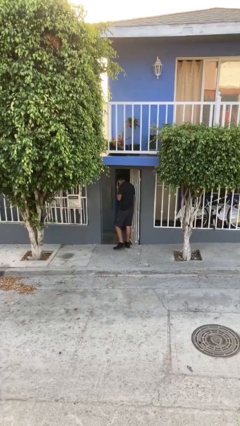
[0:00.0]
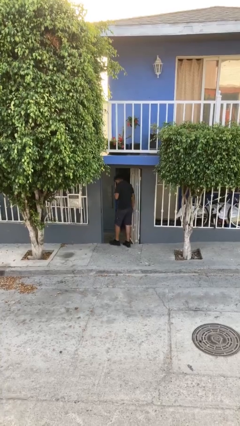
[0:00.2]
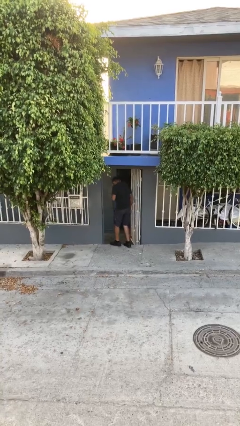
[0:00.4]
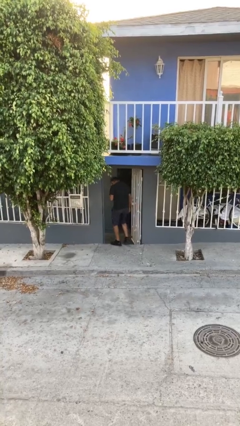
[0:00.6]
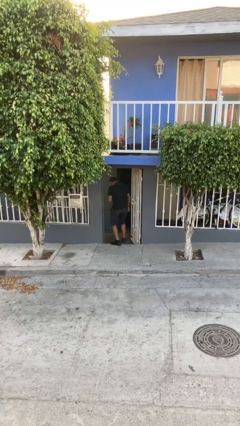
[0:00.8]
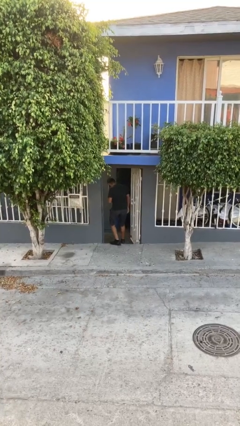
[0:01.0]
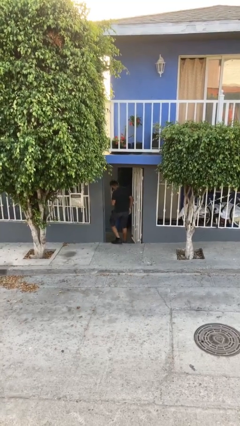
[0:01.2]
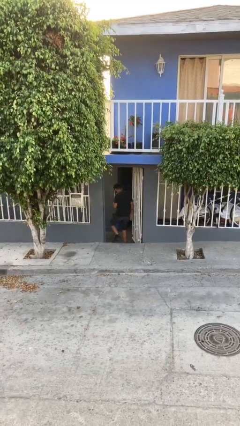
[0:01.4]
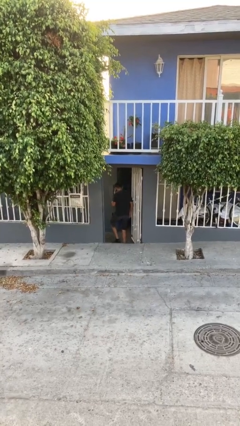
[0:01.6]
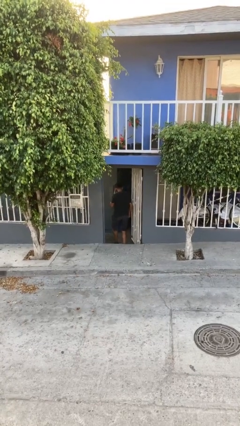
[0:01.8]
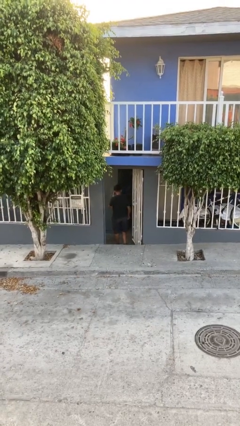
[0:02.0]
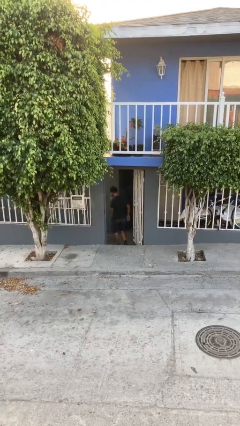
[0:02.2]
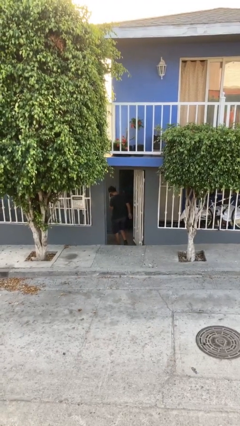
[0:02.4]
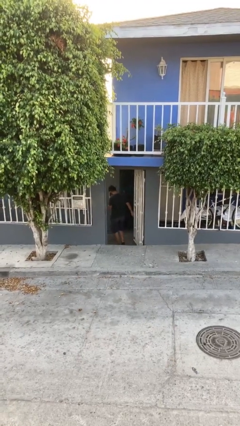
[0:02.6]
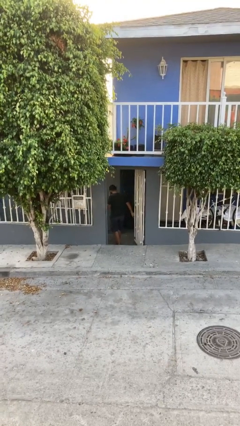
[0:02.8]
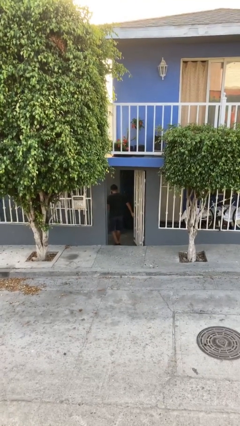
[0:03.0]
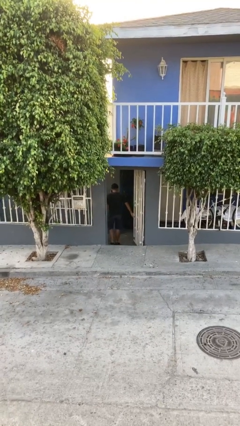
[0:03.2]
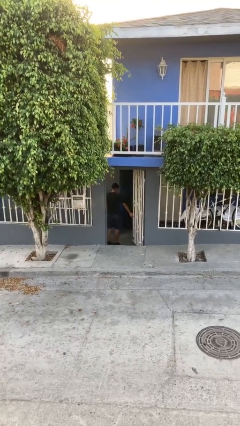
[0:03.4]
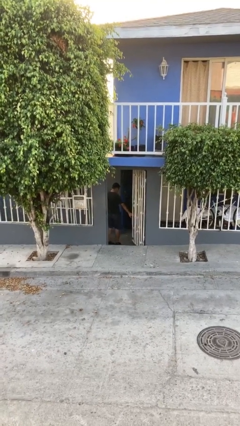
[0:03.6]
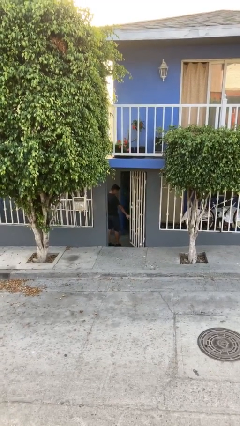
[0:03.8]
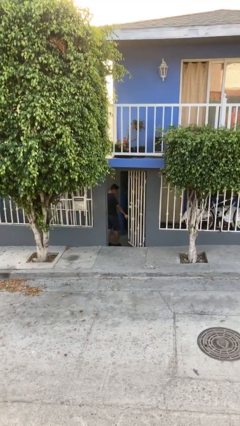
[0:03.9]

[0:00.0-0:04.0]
person exits scene through structure

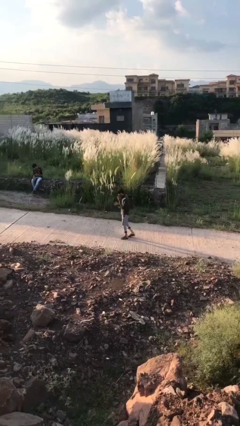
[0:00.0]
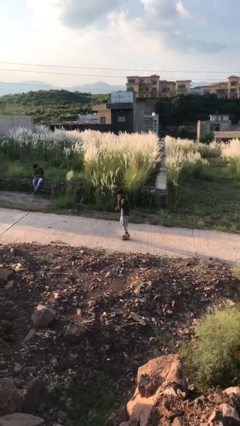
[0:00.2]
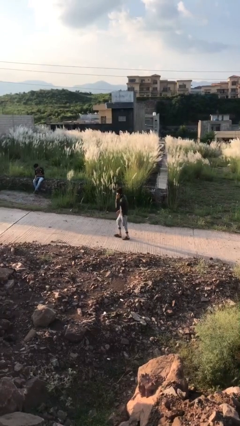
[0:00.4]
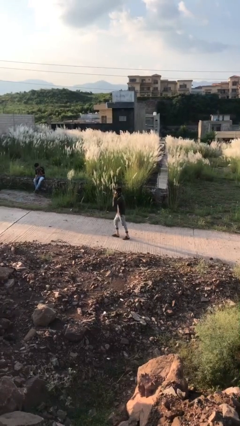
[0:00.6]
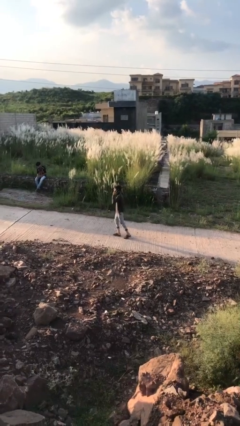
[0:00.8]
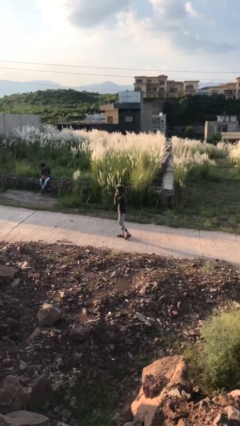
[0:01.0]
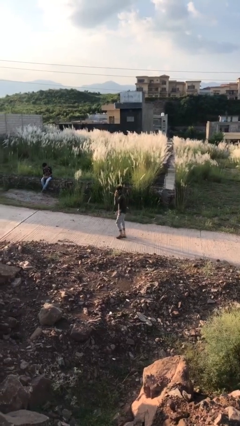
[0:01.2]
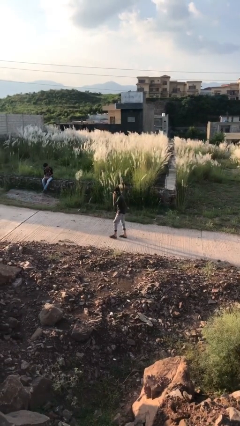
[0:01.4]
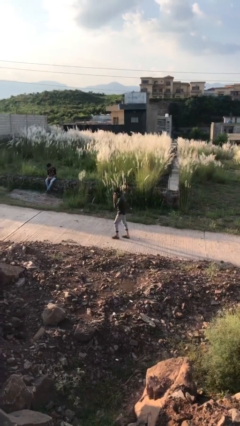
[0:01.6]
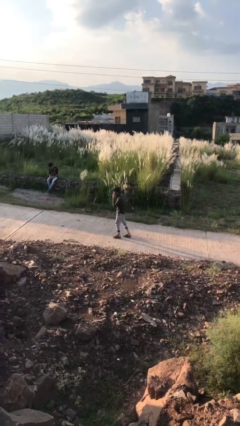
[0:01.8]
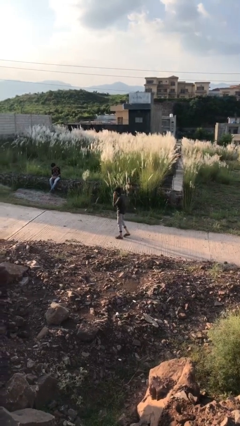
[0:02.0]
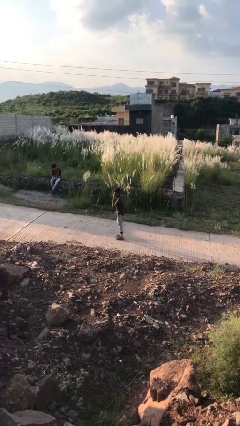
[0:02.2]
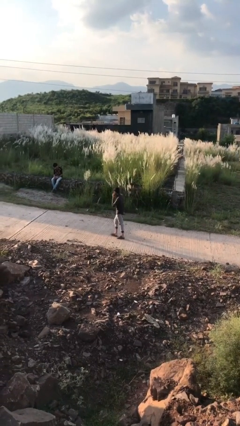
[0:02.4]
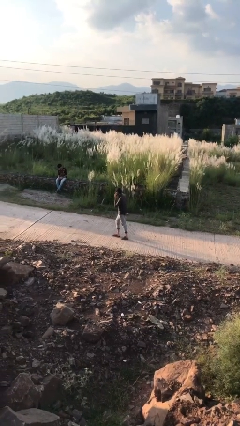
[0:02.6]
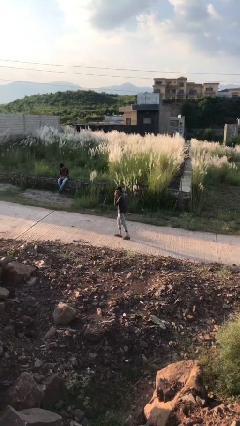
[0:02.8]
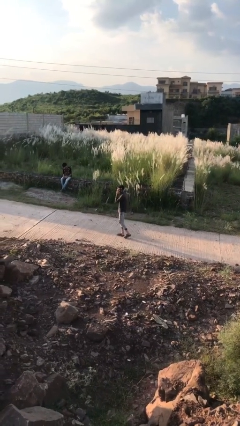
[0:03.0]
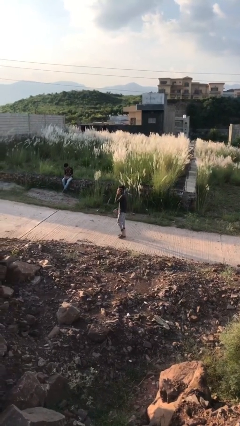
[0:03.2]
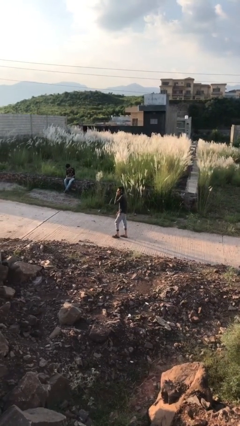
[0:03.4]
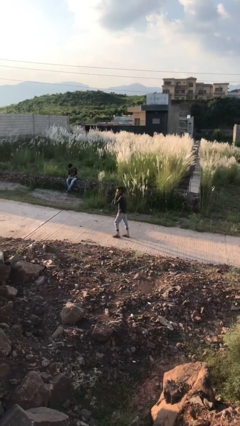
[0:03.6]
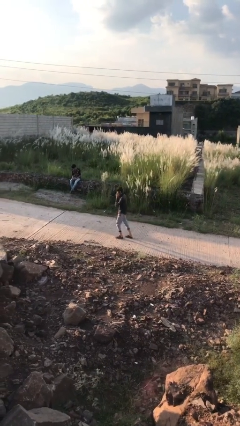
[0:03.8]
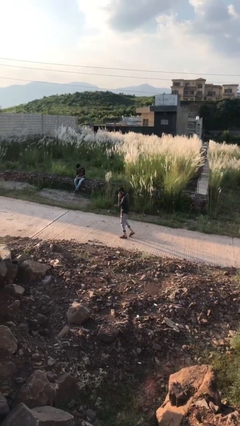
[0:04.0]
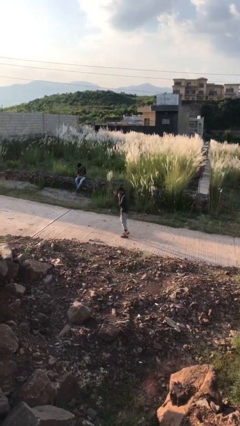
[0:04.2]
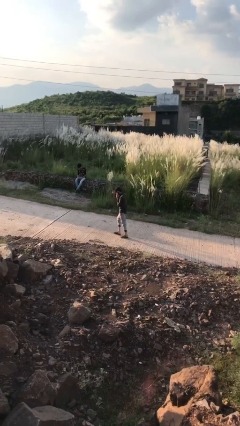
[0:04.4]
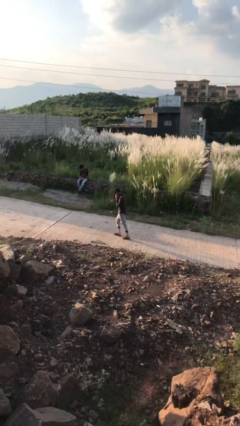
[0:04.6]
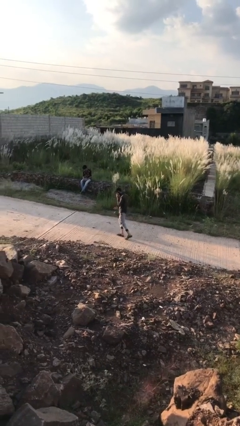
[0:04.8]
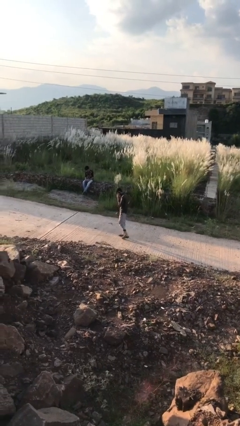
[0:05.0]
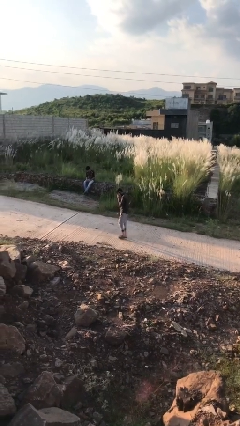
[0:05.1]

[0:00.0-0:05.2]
person talks on phone

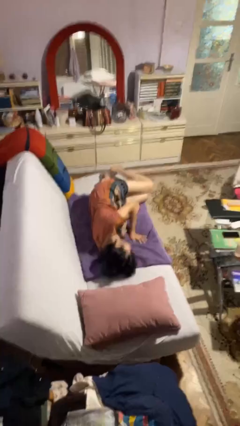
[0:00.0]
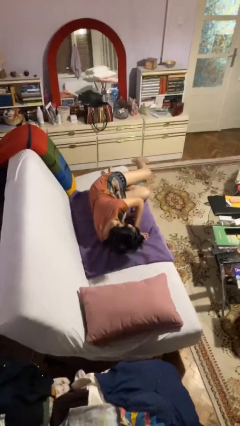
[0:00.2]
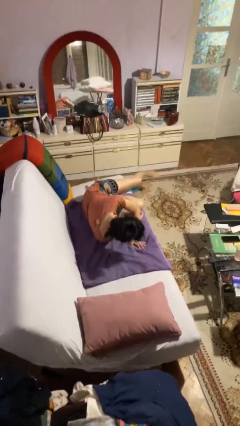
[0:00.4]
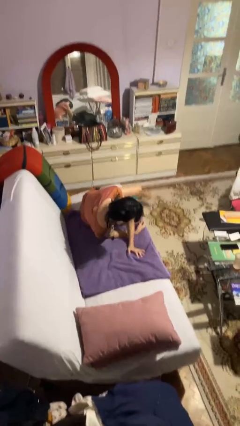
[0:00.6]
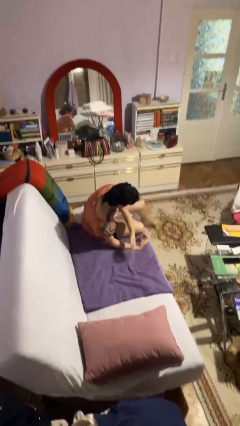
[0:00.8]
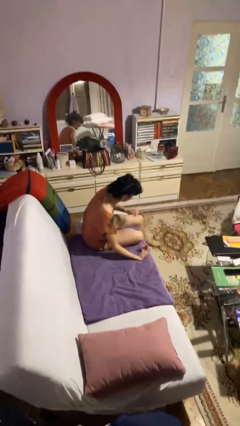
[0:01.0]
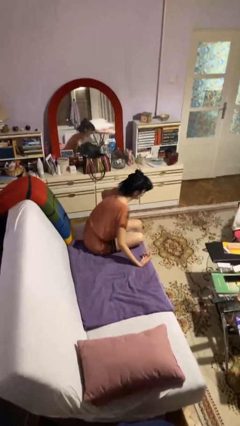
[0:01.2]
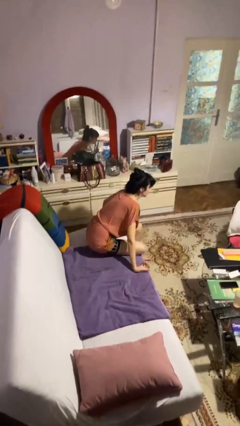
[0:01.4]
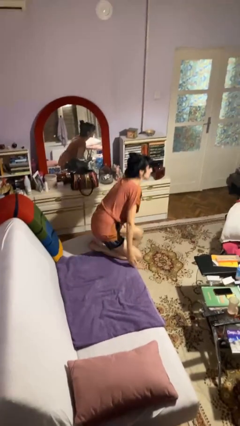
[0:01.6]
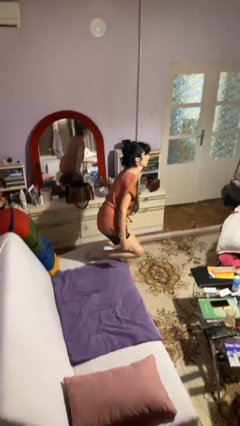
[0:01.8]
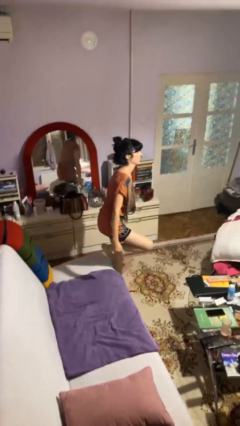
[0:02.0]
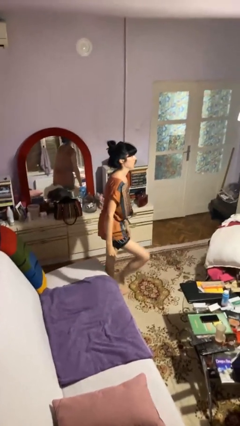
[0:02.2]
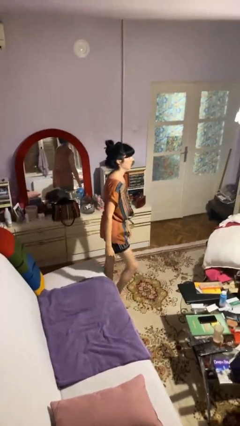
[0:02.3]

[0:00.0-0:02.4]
person stands up

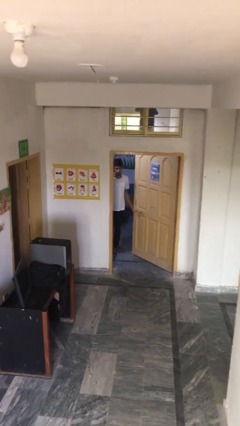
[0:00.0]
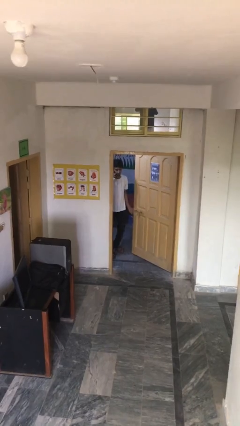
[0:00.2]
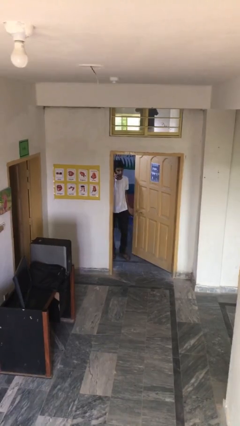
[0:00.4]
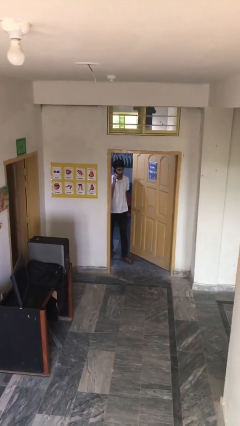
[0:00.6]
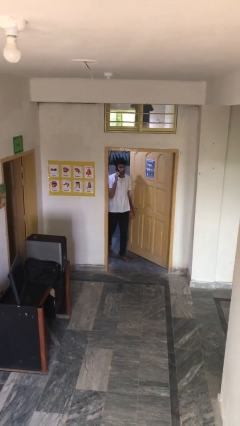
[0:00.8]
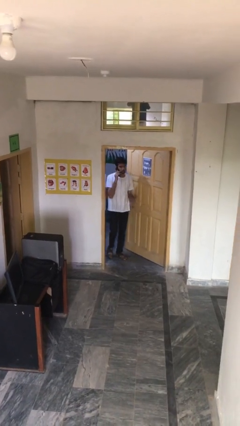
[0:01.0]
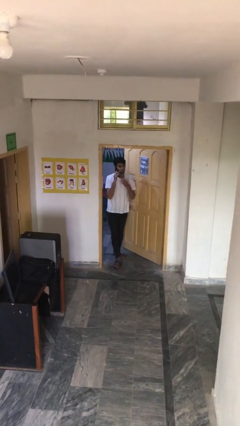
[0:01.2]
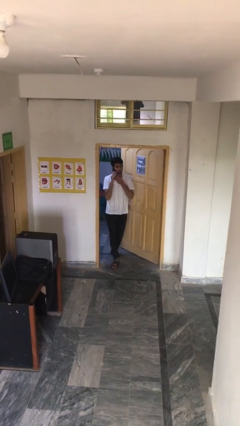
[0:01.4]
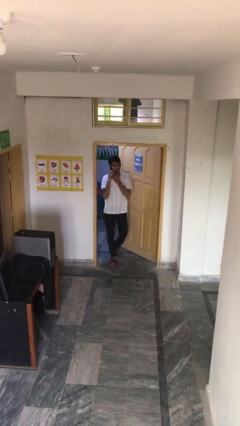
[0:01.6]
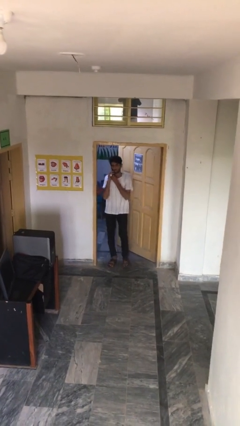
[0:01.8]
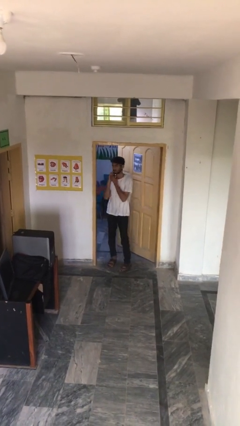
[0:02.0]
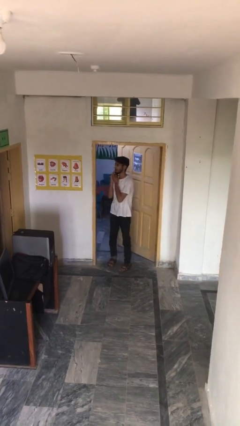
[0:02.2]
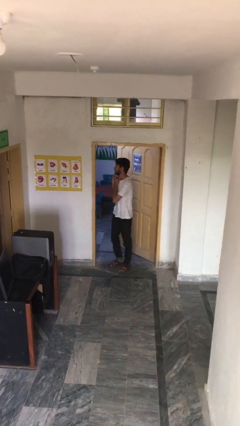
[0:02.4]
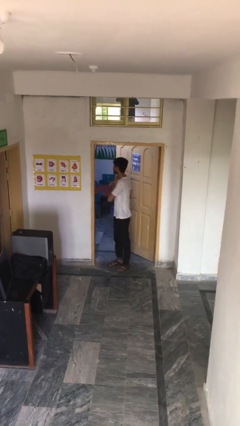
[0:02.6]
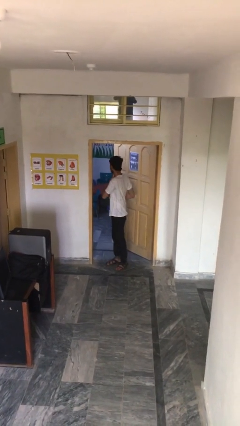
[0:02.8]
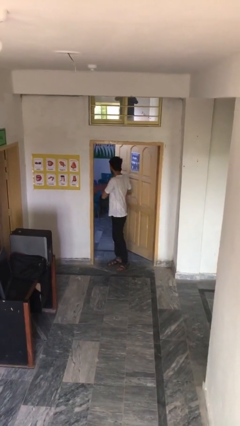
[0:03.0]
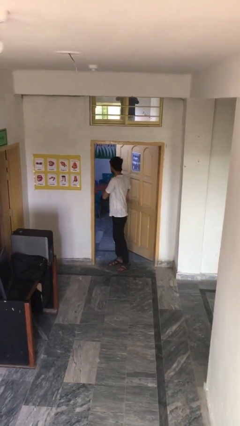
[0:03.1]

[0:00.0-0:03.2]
person enters scene through structure

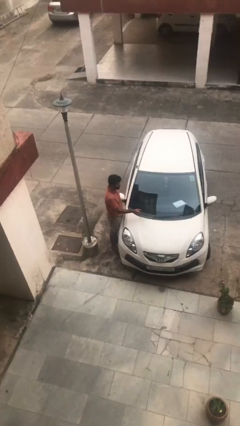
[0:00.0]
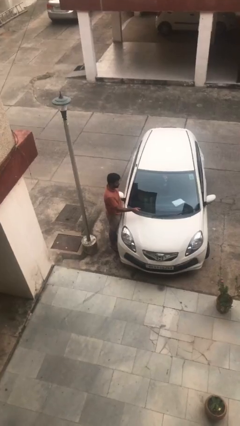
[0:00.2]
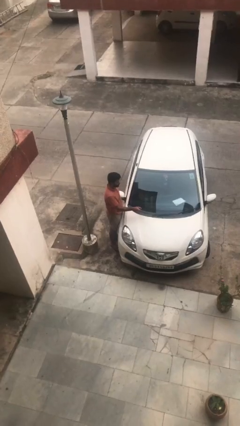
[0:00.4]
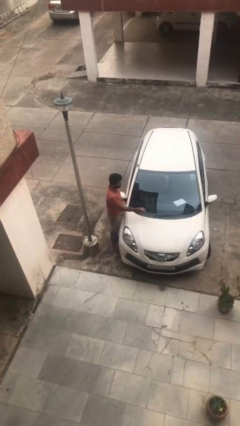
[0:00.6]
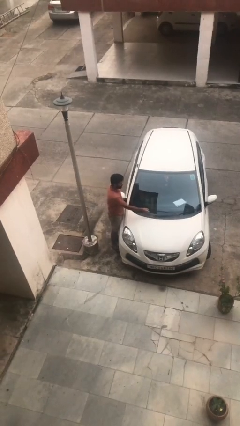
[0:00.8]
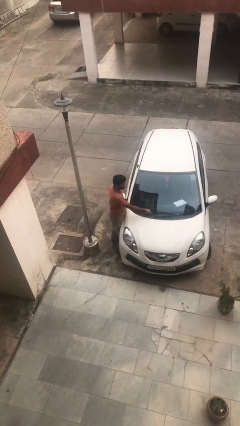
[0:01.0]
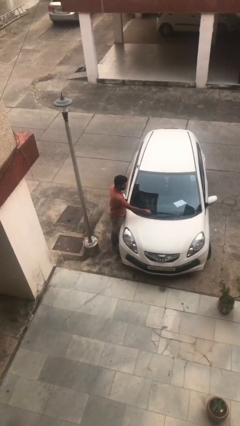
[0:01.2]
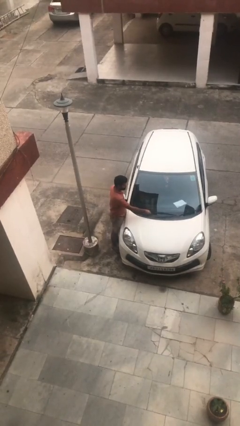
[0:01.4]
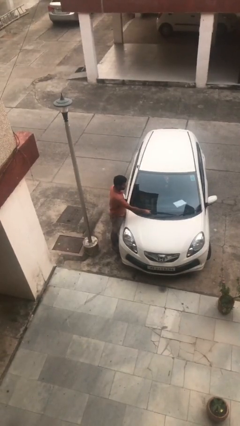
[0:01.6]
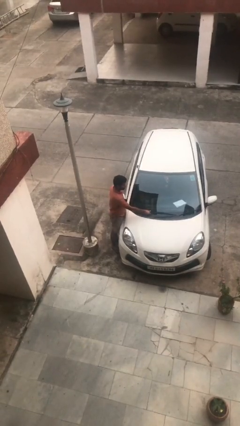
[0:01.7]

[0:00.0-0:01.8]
person flips down car wipers

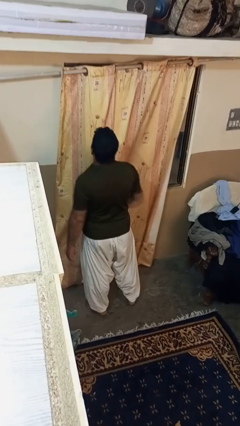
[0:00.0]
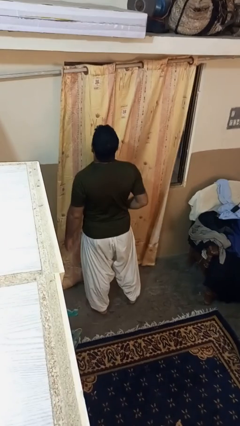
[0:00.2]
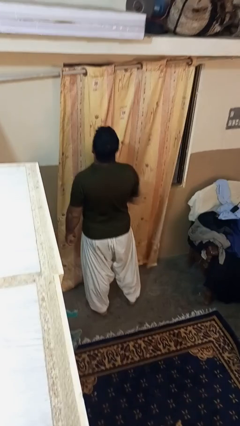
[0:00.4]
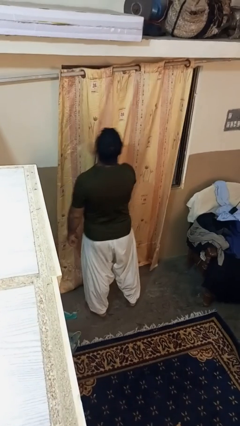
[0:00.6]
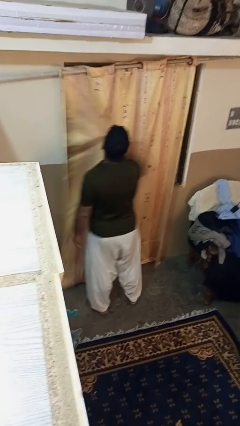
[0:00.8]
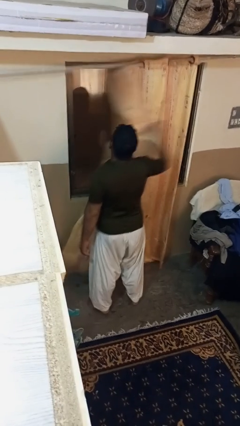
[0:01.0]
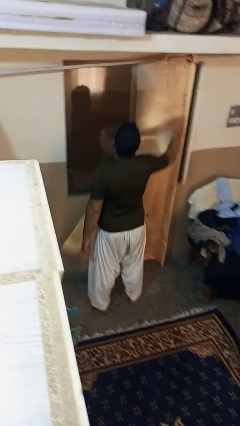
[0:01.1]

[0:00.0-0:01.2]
person opens curtains
